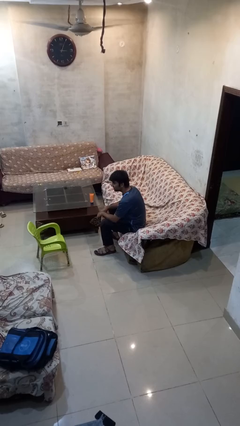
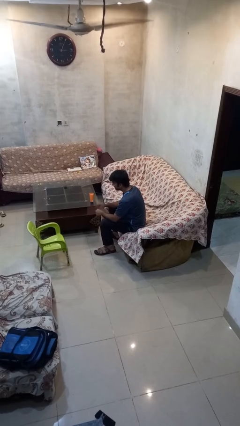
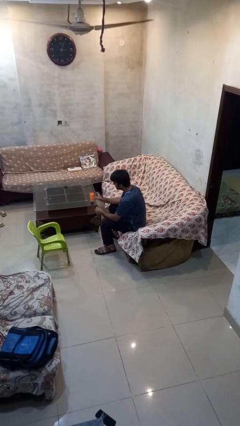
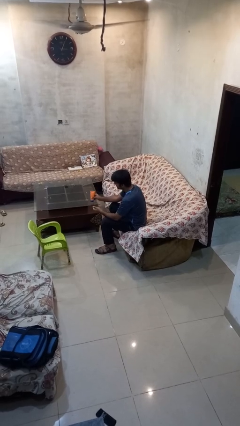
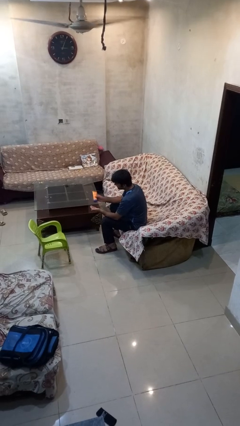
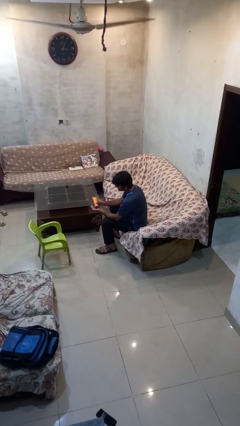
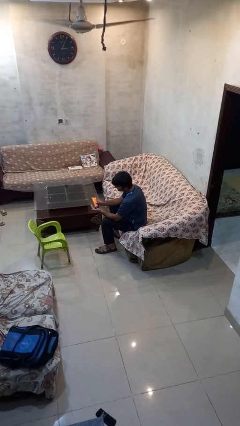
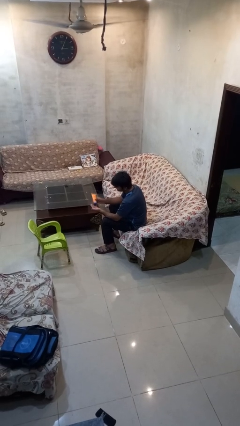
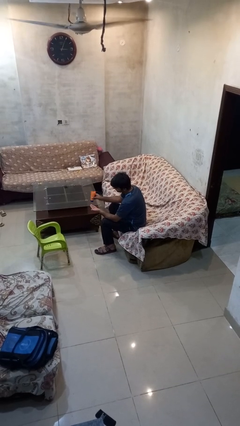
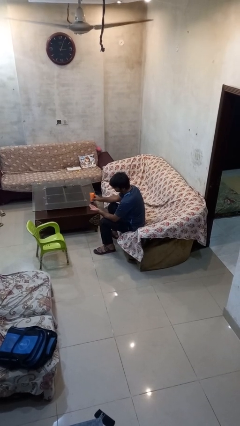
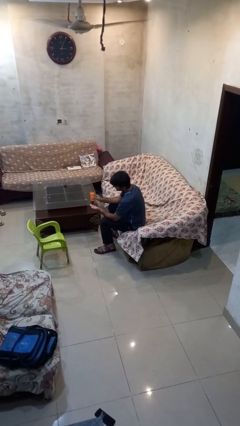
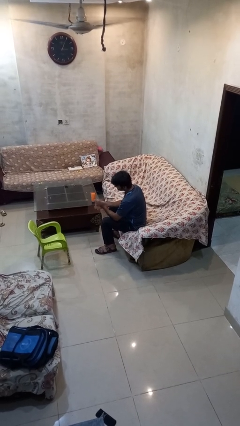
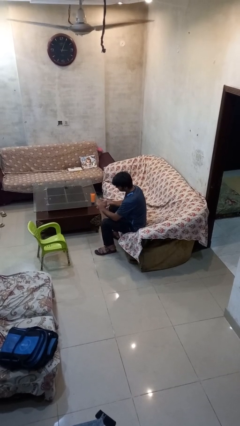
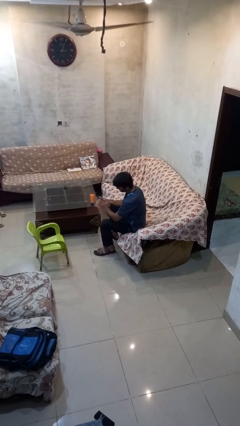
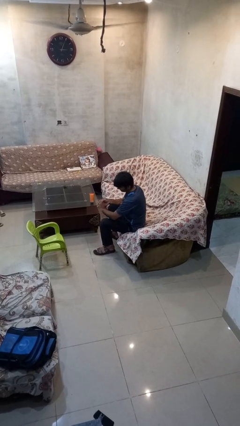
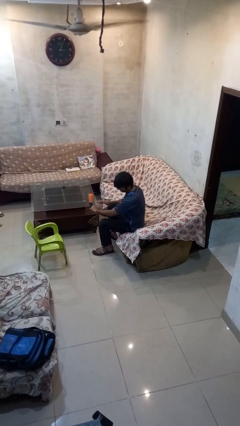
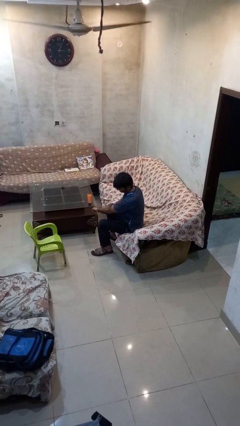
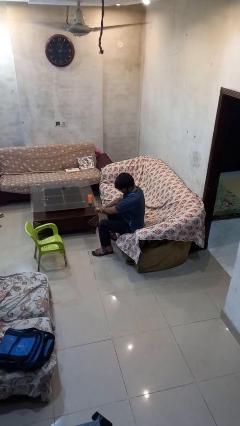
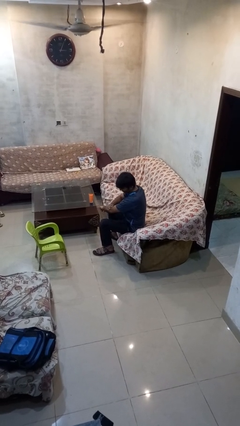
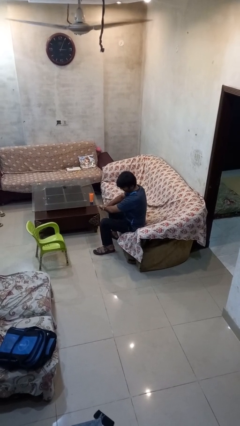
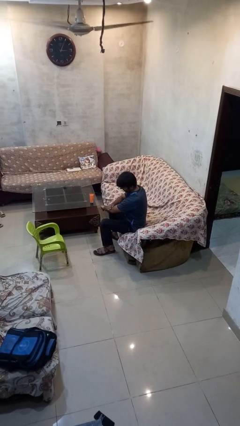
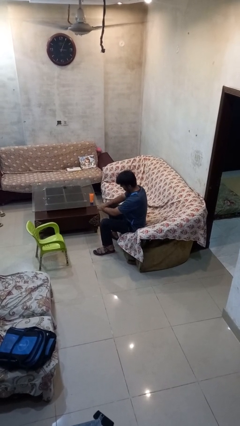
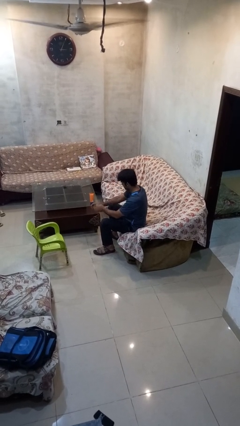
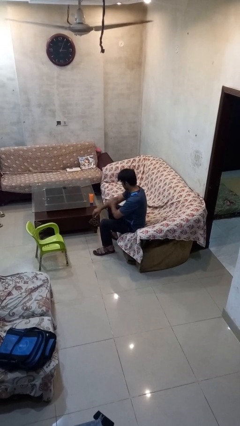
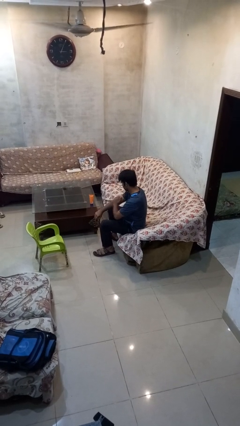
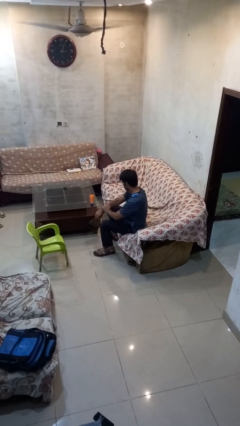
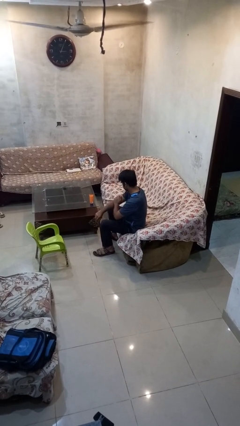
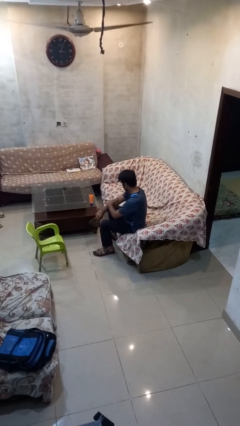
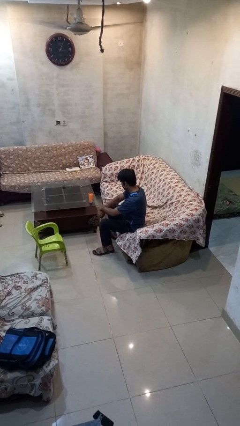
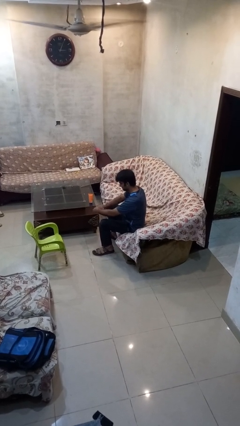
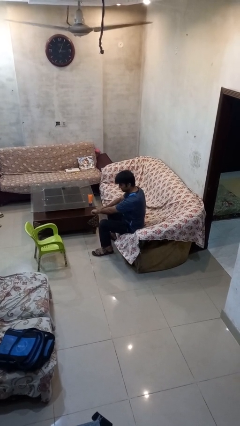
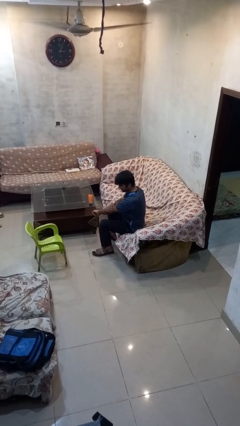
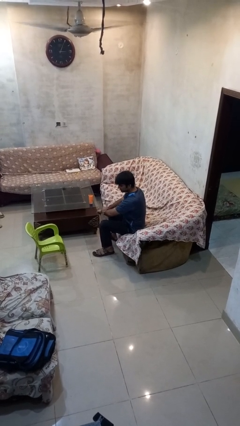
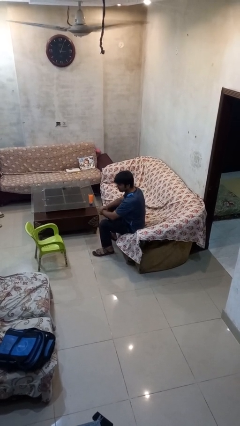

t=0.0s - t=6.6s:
person applies sunscreen

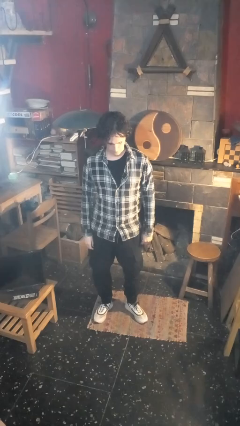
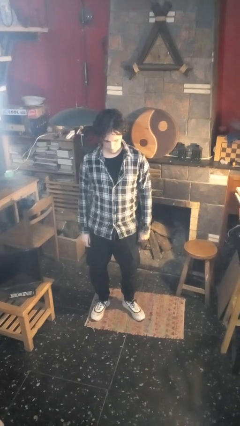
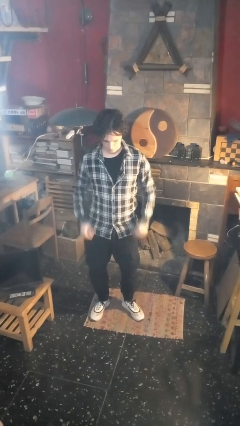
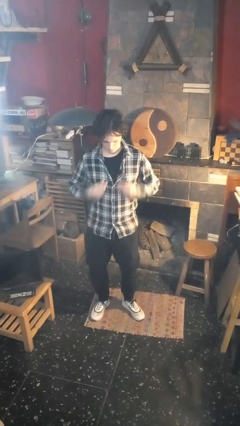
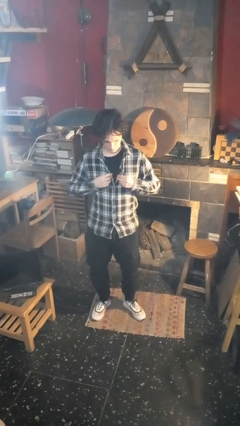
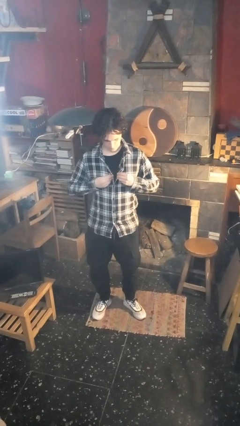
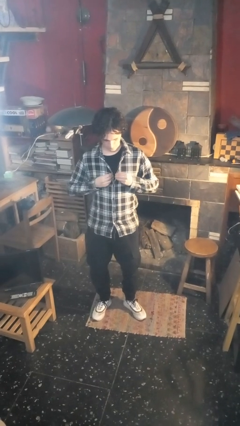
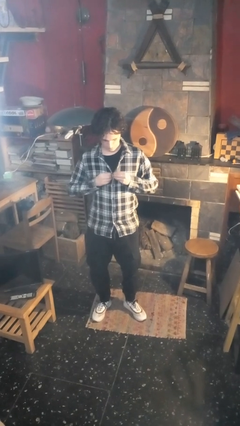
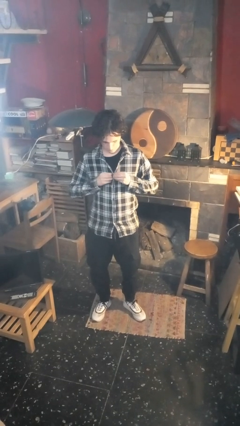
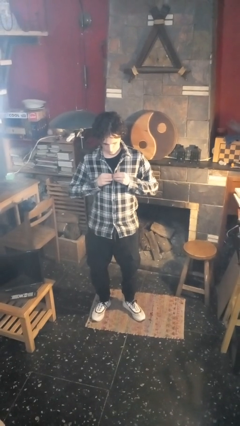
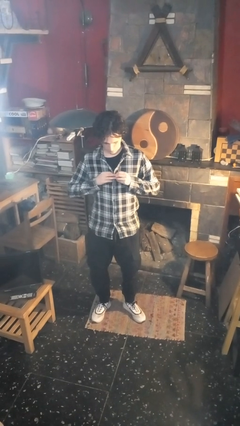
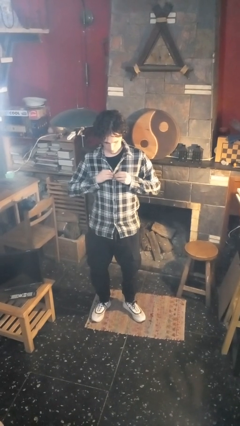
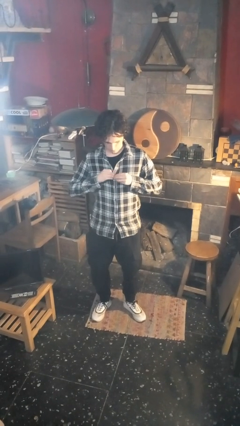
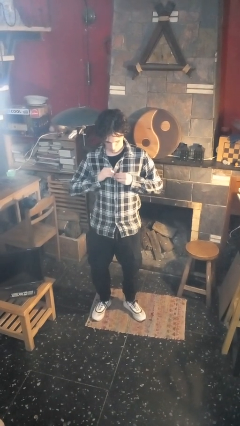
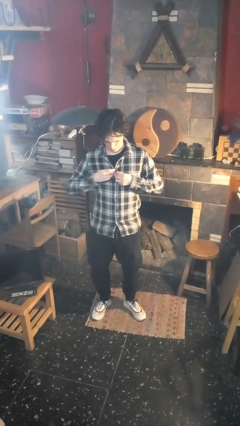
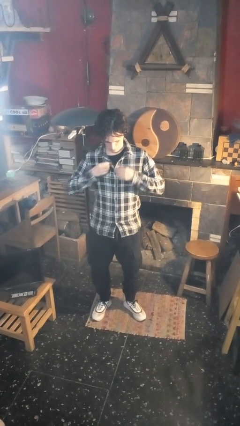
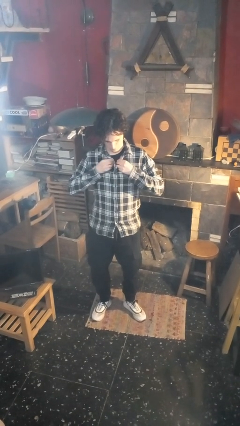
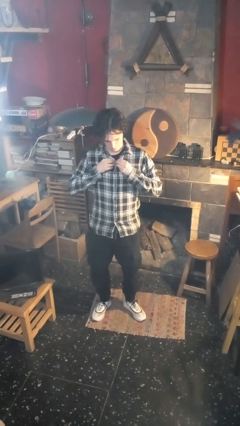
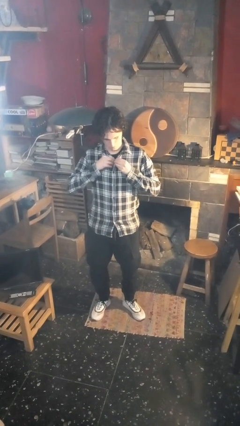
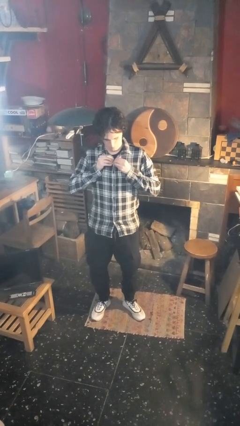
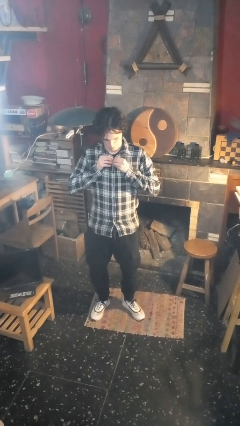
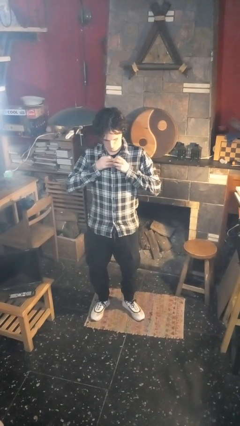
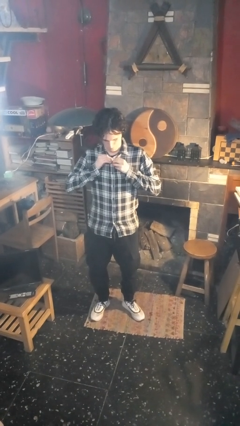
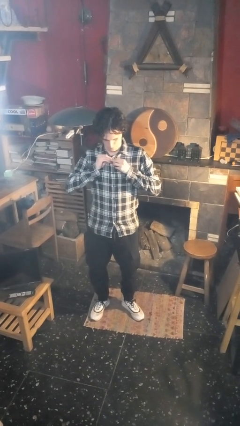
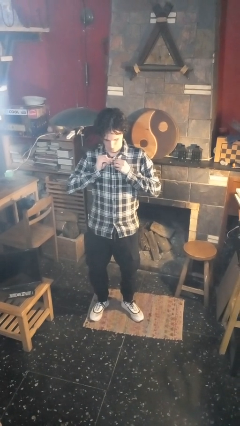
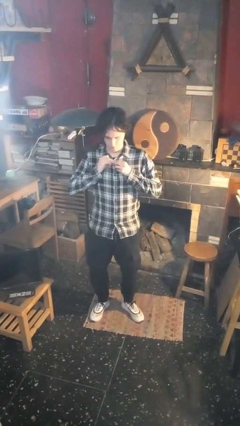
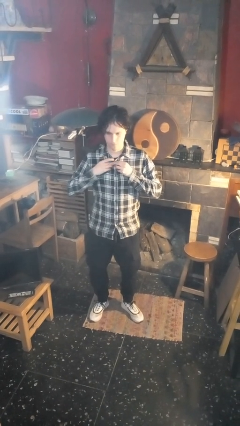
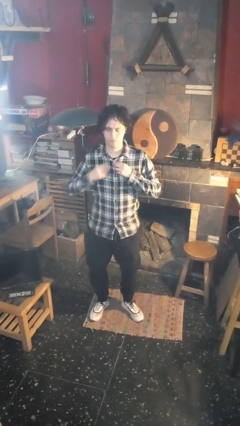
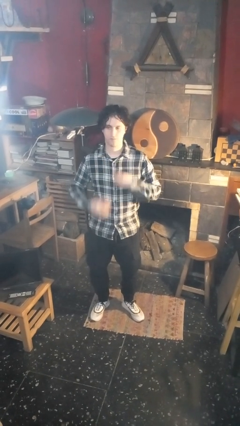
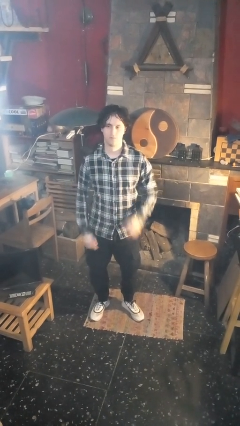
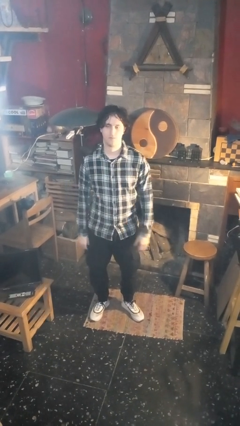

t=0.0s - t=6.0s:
person buttons shirt

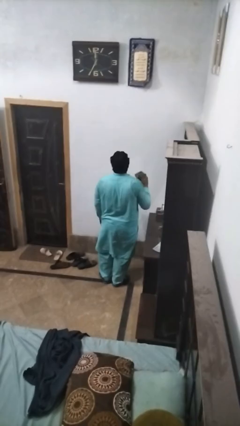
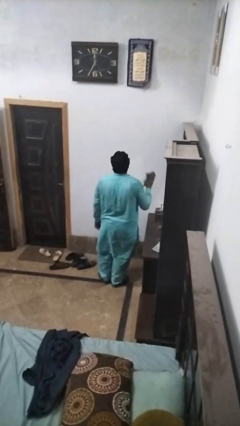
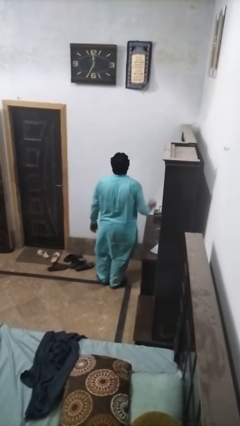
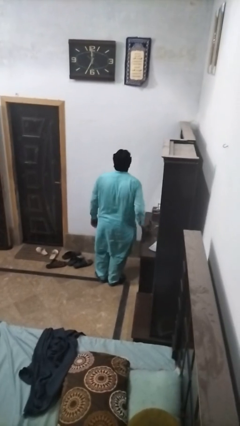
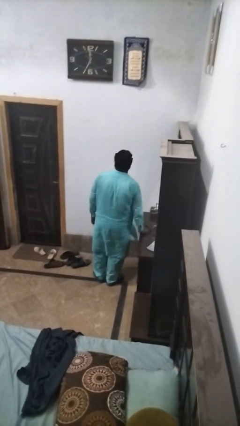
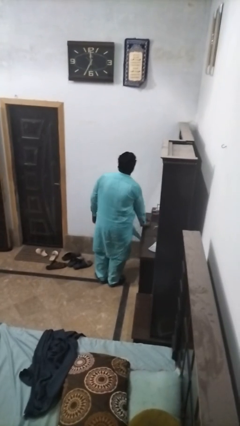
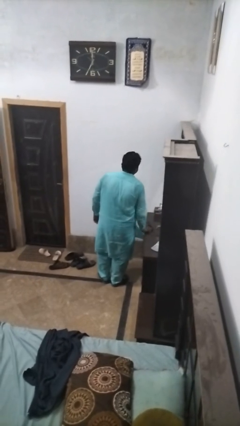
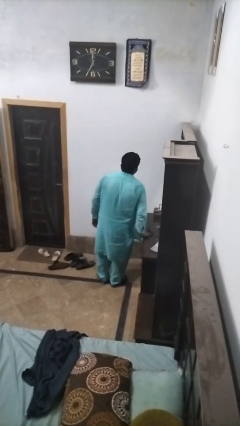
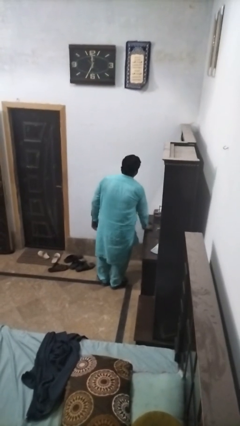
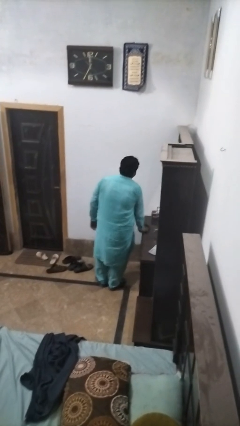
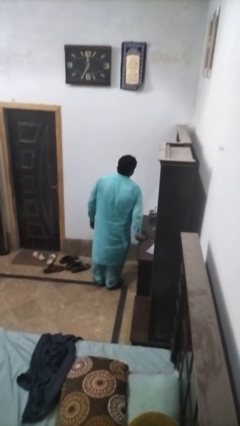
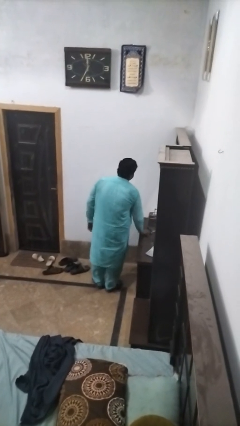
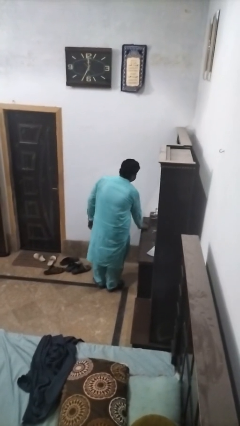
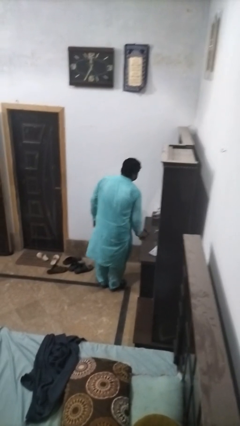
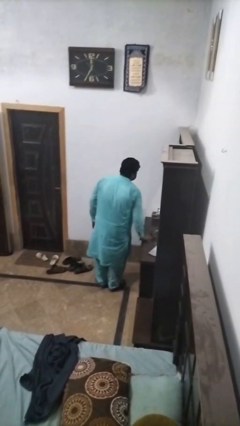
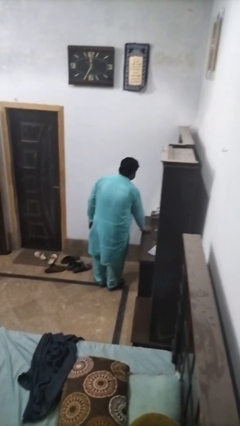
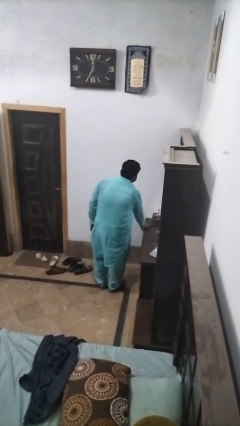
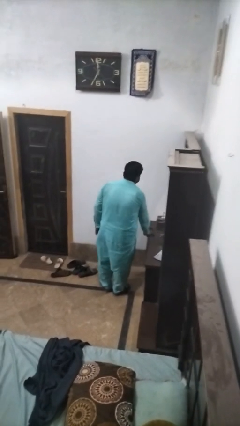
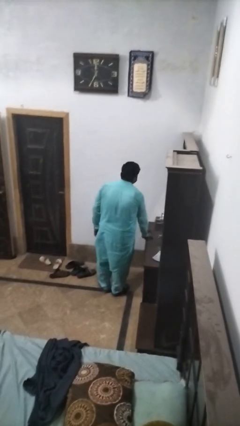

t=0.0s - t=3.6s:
person cleans table with rag

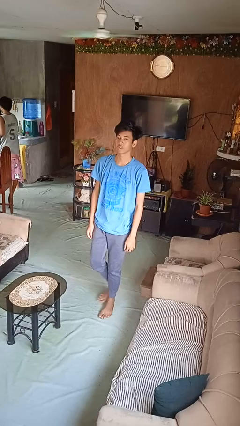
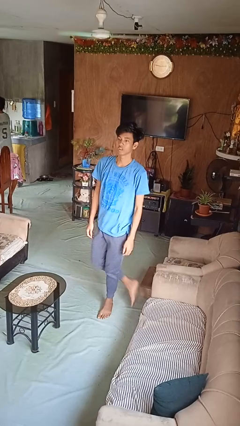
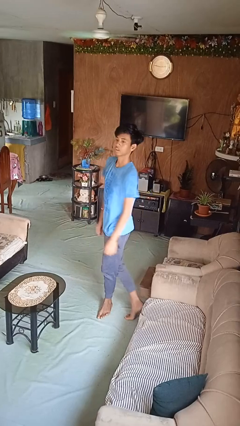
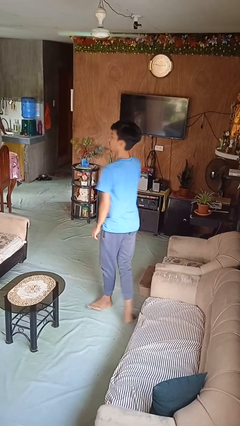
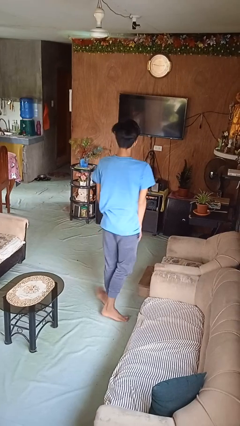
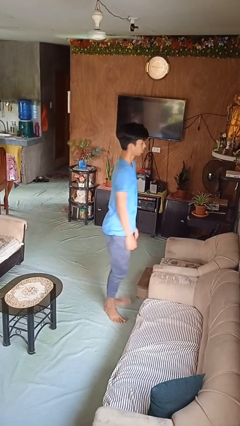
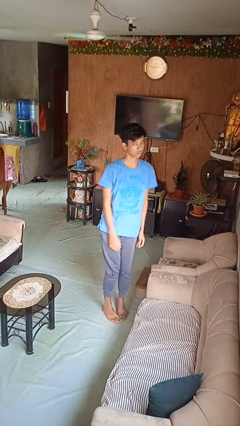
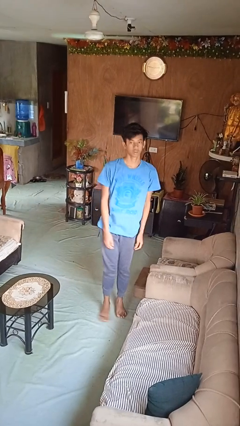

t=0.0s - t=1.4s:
person twirls

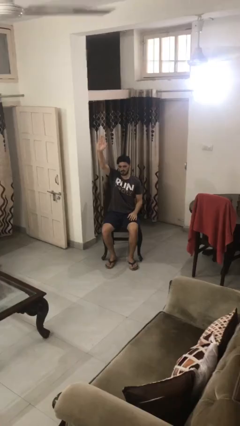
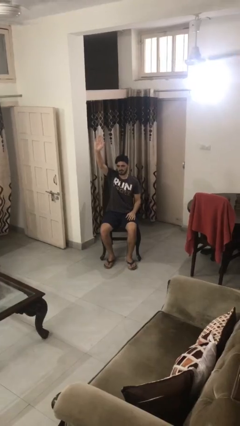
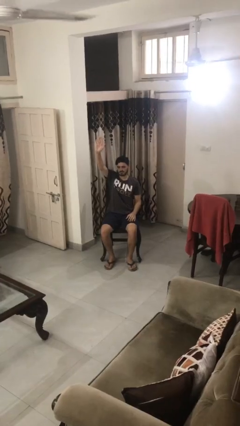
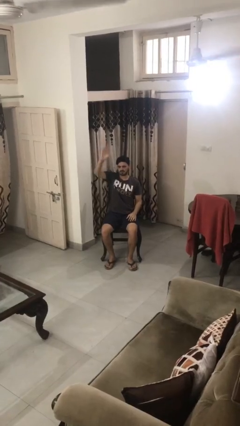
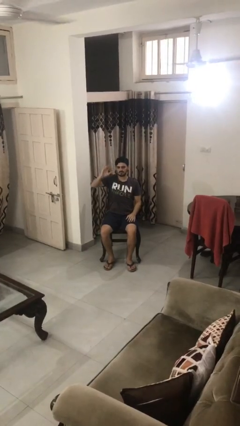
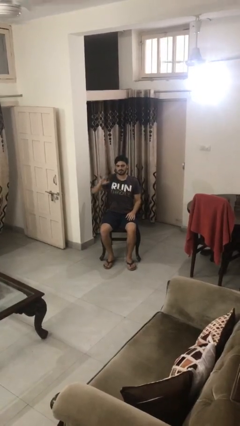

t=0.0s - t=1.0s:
person gestures lower hand
